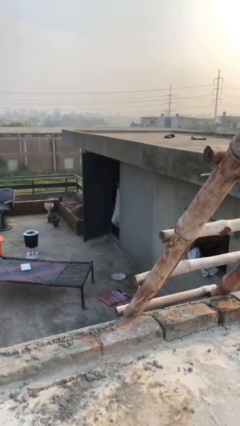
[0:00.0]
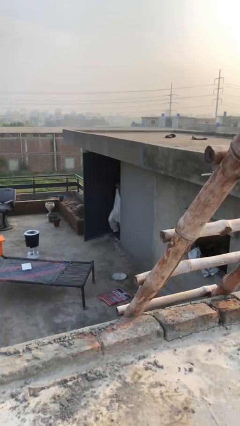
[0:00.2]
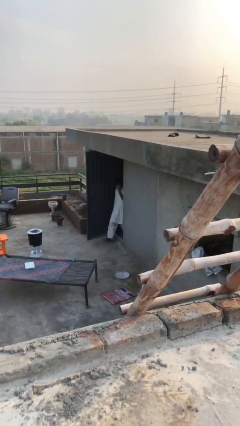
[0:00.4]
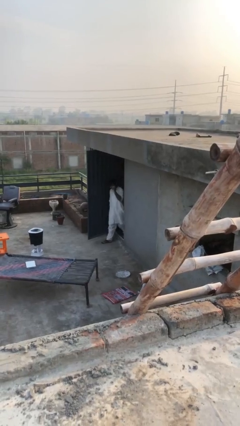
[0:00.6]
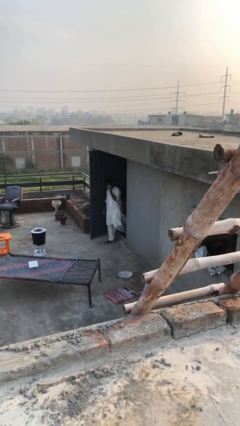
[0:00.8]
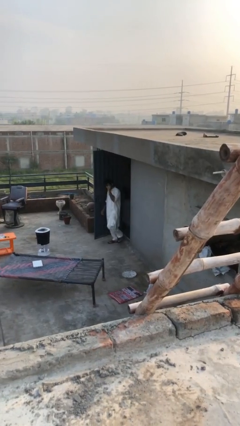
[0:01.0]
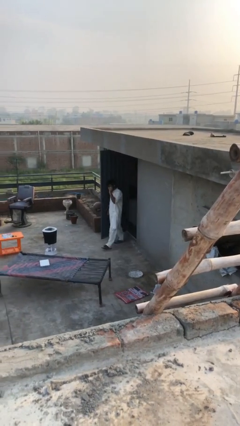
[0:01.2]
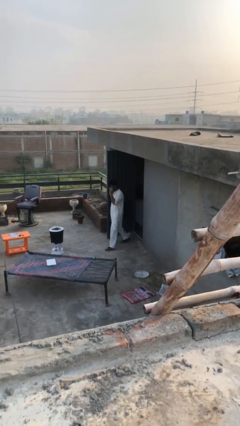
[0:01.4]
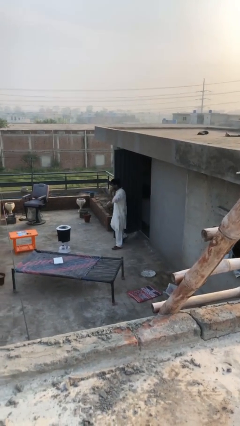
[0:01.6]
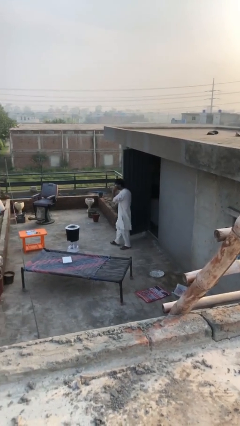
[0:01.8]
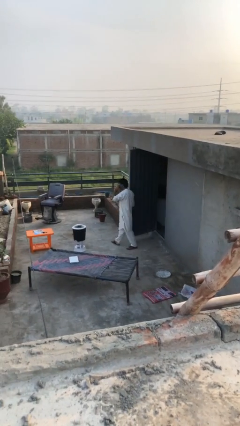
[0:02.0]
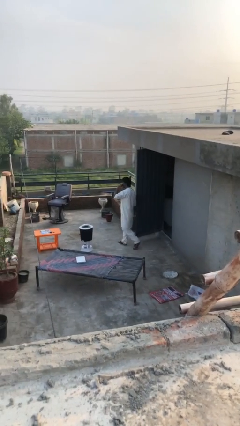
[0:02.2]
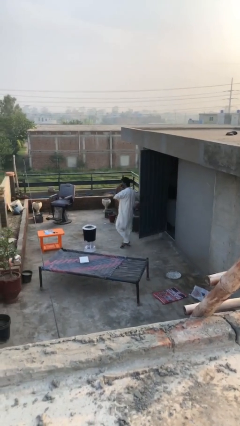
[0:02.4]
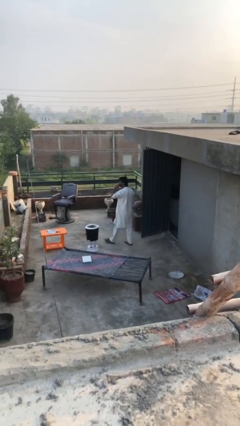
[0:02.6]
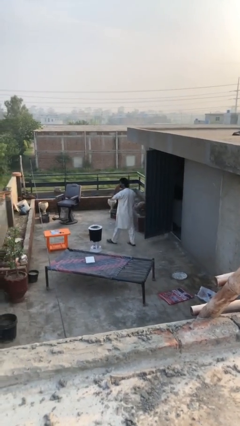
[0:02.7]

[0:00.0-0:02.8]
person enters scene through structure

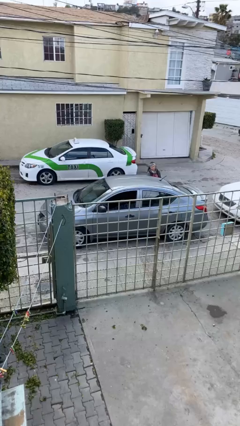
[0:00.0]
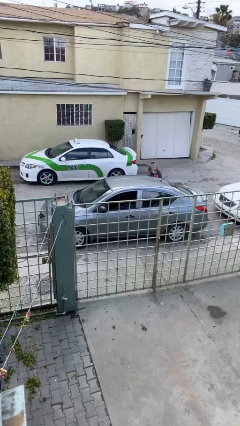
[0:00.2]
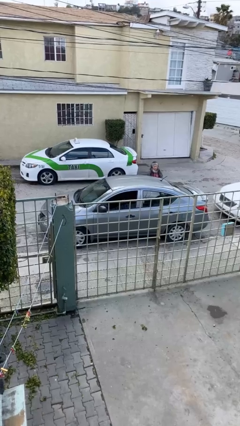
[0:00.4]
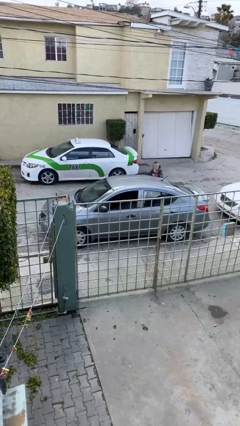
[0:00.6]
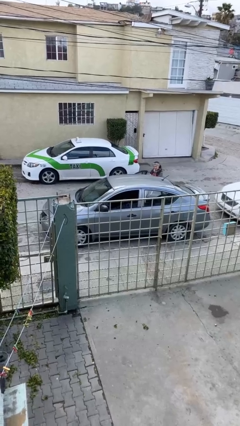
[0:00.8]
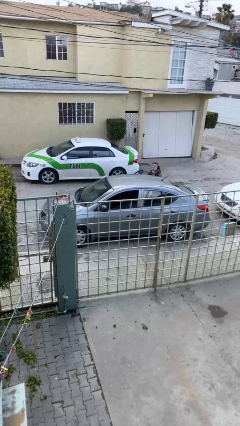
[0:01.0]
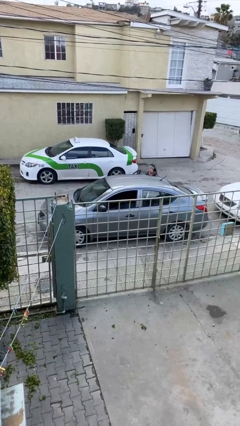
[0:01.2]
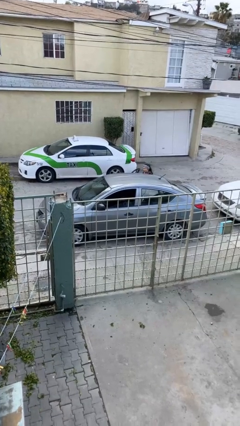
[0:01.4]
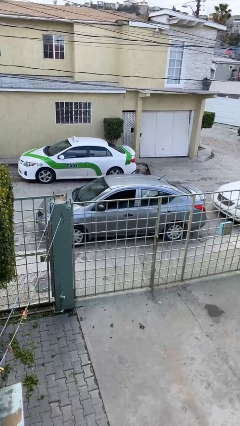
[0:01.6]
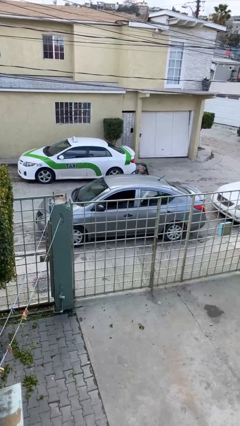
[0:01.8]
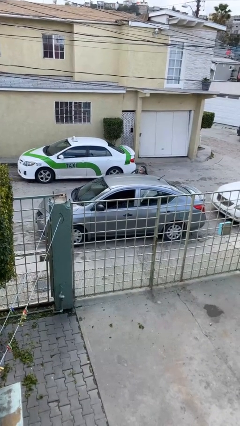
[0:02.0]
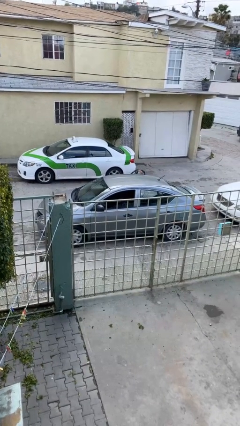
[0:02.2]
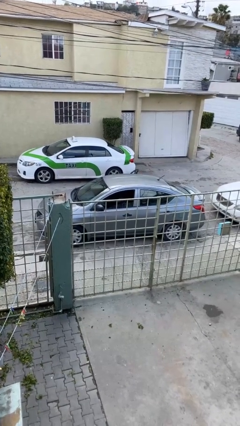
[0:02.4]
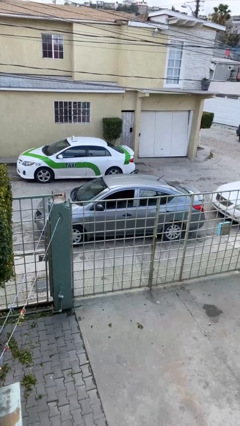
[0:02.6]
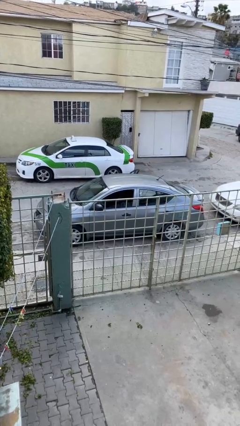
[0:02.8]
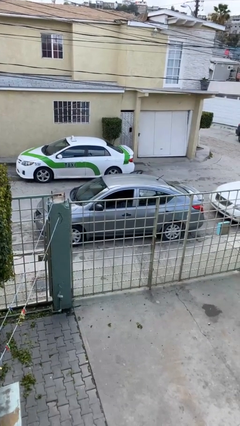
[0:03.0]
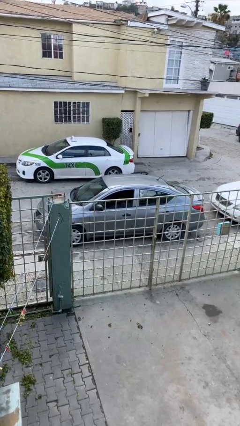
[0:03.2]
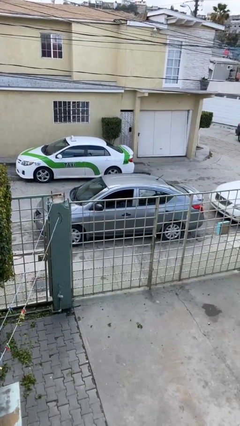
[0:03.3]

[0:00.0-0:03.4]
car picks up person

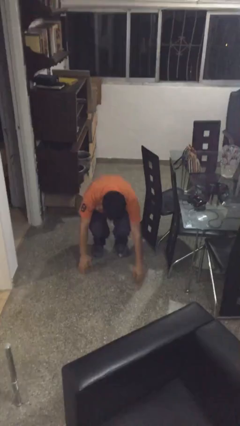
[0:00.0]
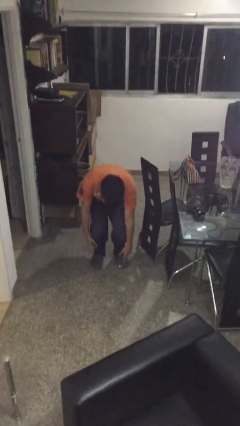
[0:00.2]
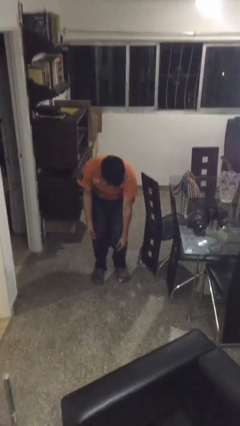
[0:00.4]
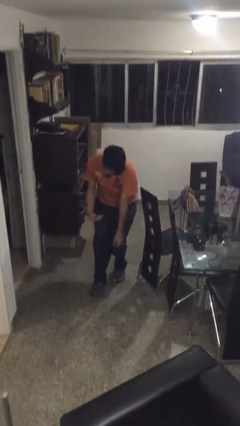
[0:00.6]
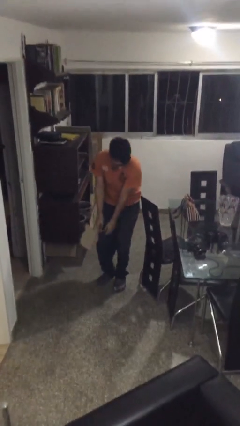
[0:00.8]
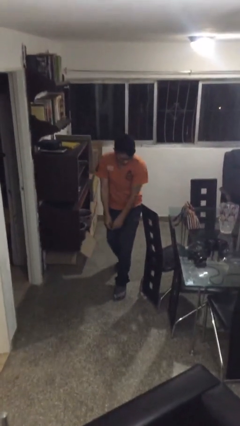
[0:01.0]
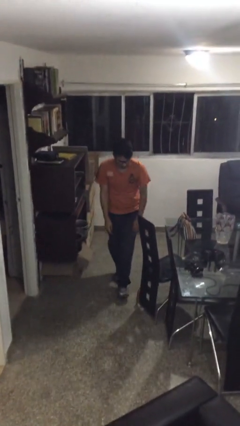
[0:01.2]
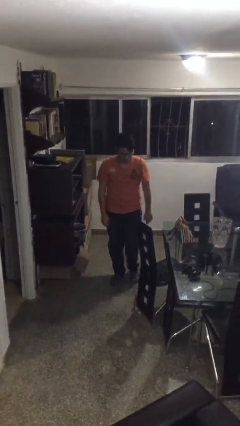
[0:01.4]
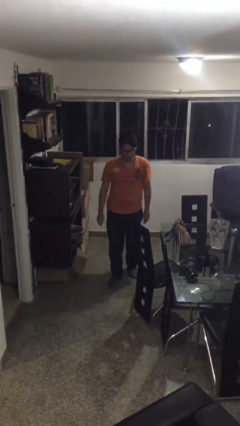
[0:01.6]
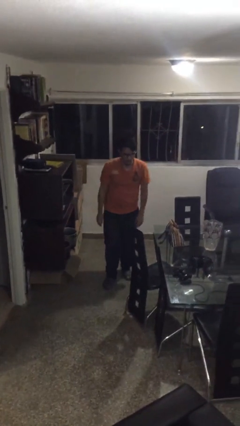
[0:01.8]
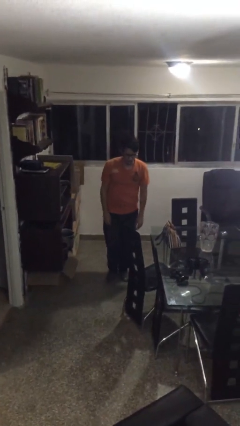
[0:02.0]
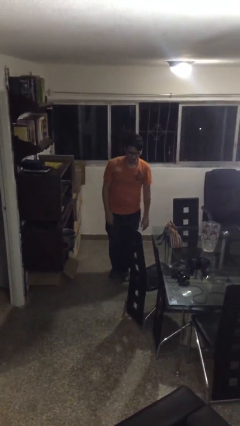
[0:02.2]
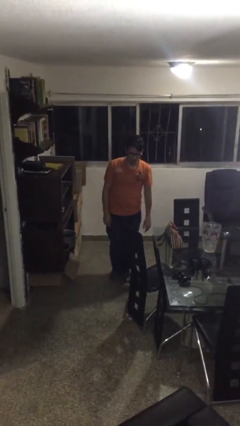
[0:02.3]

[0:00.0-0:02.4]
person stands up from floor

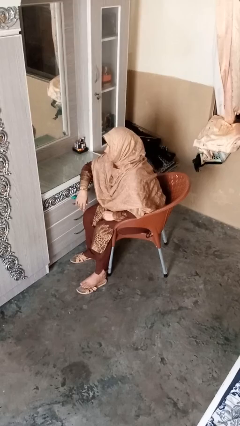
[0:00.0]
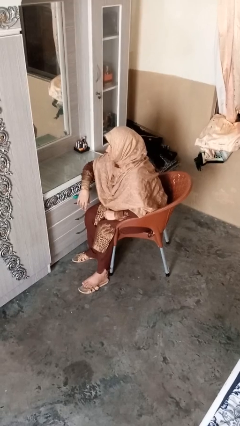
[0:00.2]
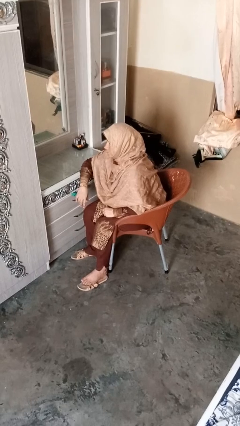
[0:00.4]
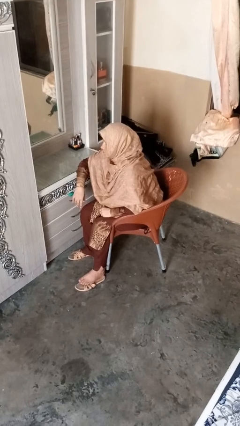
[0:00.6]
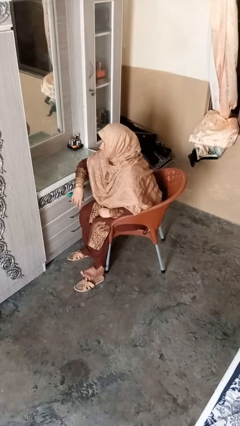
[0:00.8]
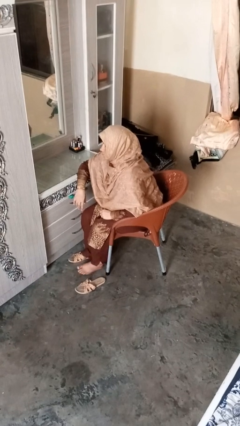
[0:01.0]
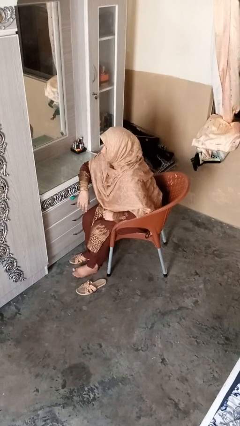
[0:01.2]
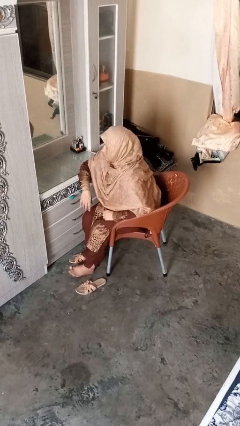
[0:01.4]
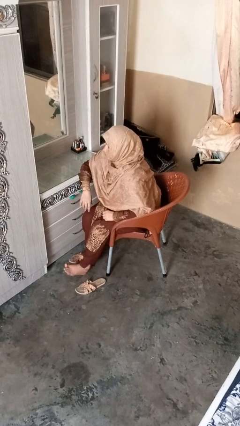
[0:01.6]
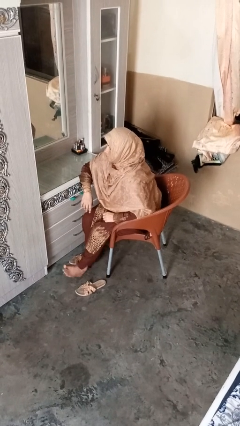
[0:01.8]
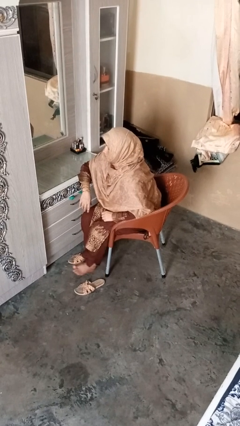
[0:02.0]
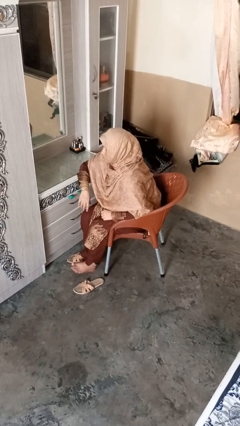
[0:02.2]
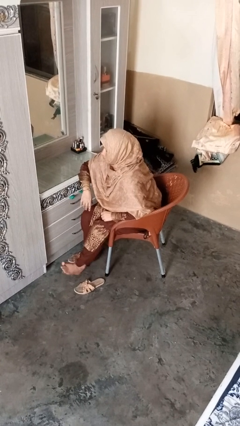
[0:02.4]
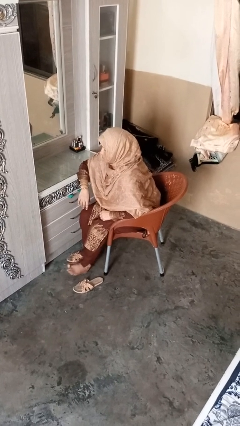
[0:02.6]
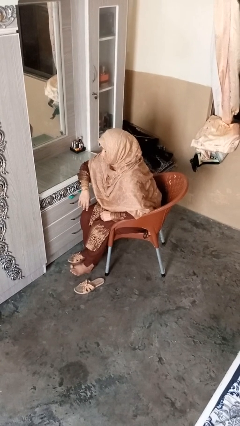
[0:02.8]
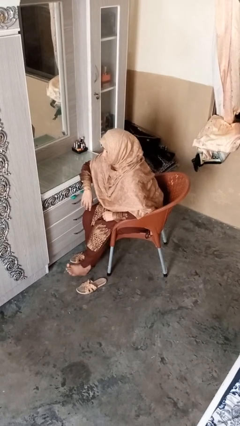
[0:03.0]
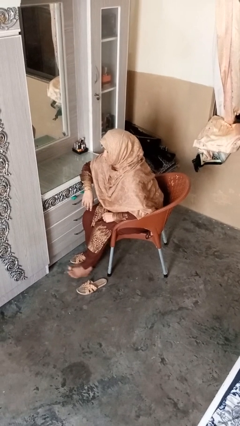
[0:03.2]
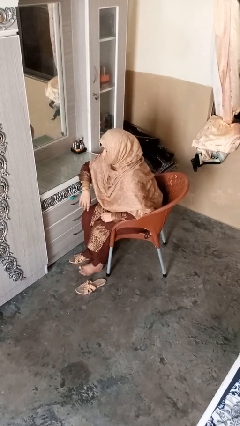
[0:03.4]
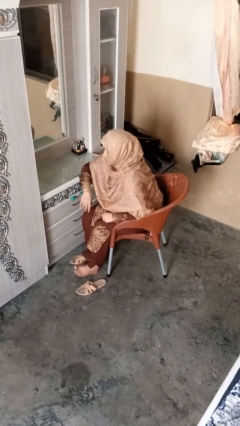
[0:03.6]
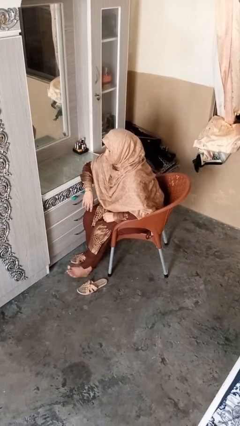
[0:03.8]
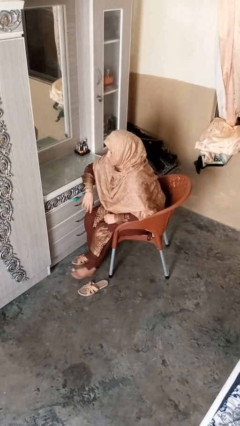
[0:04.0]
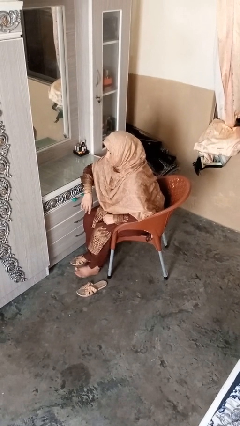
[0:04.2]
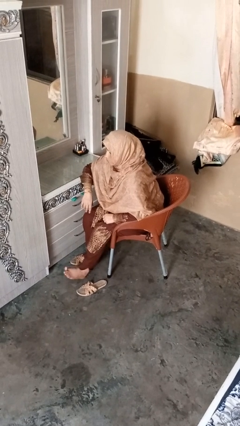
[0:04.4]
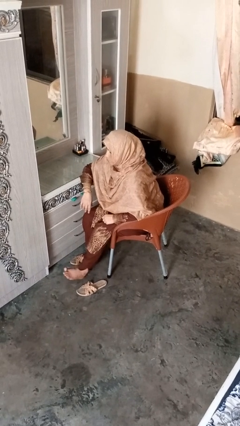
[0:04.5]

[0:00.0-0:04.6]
person rubs foot

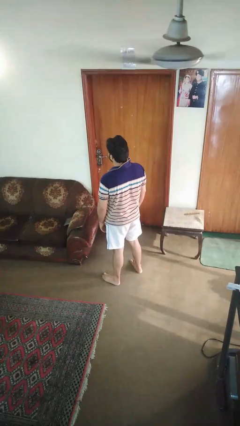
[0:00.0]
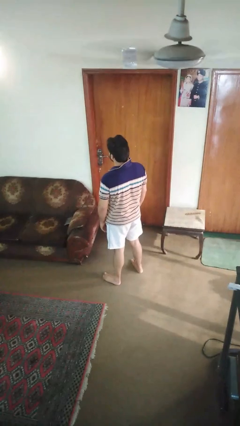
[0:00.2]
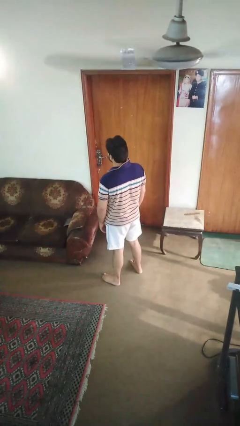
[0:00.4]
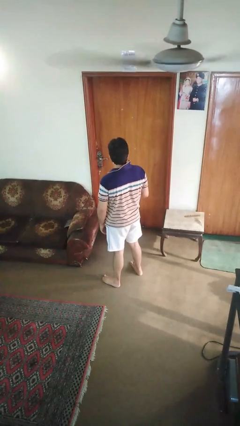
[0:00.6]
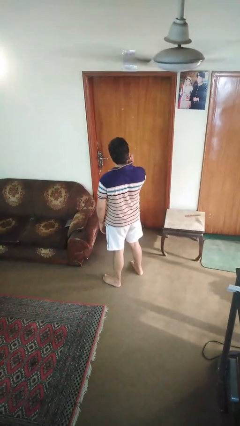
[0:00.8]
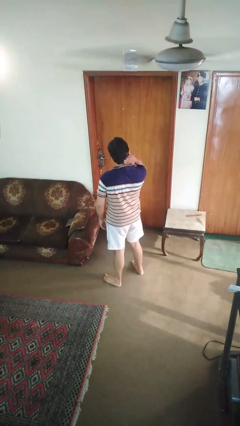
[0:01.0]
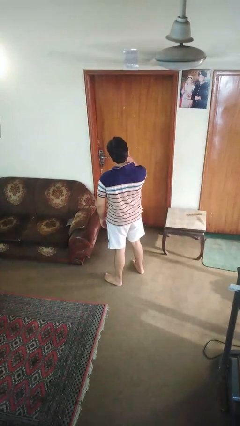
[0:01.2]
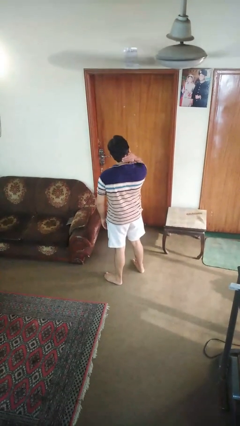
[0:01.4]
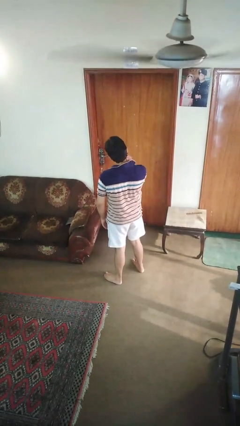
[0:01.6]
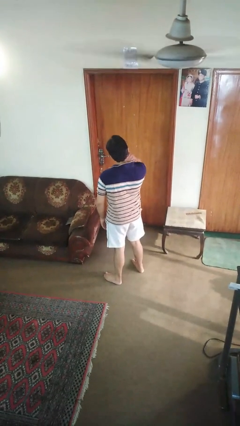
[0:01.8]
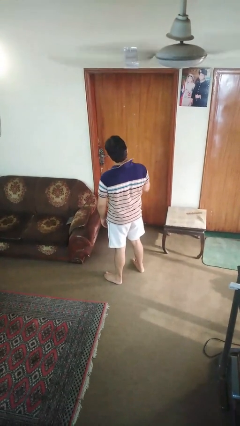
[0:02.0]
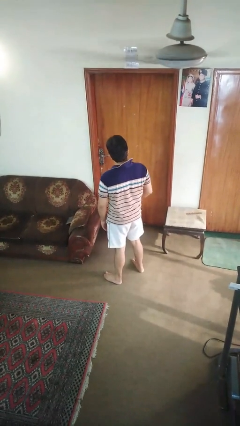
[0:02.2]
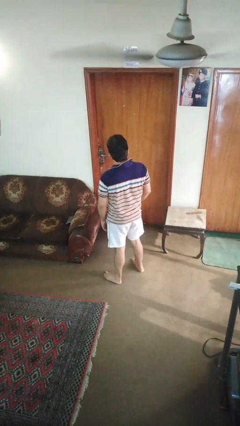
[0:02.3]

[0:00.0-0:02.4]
person rubs neck

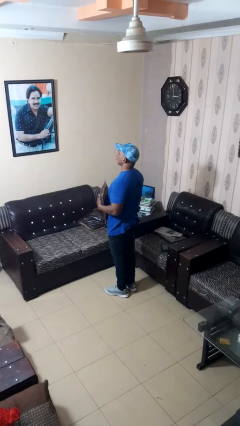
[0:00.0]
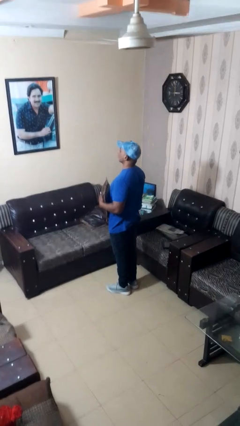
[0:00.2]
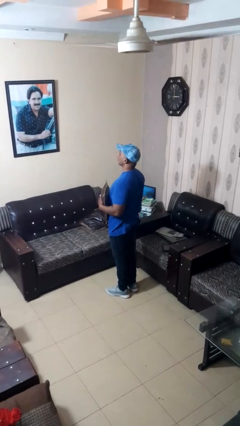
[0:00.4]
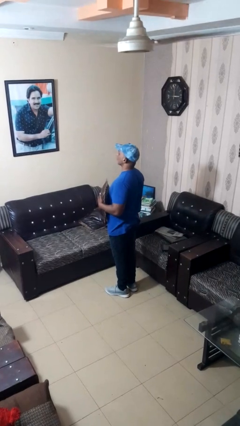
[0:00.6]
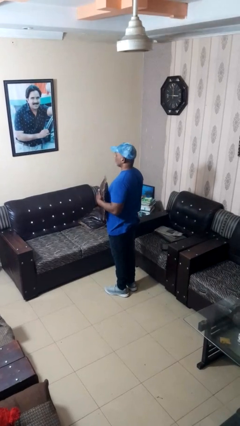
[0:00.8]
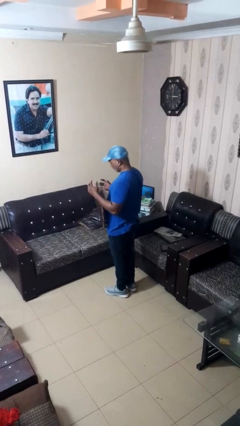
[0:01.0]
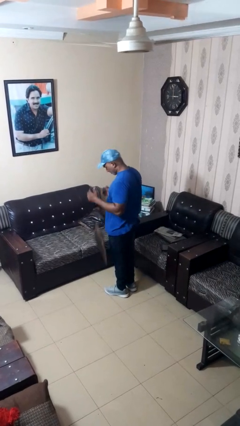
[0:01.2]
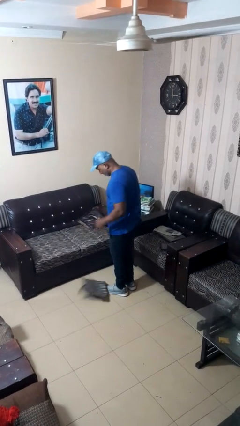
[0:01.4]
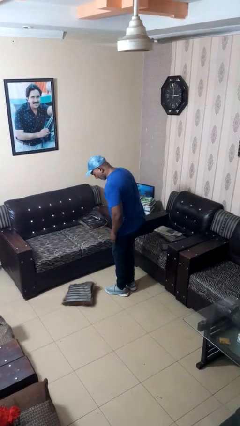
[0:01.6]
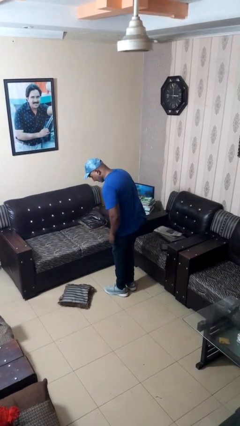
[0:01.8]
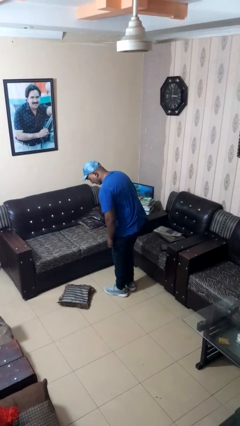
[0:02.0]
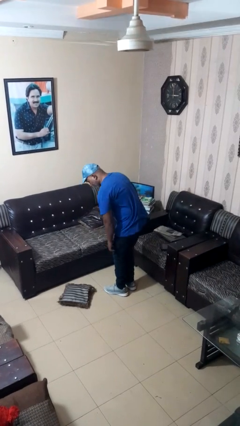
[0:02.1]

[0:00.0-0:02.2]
person drops object
